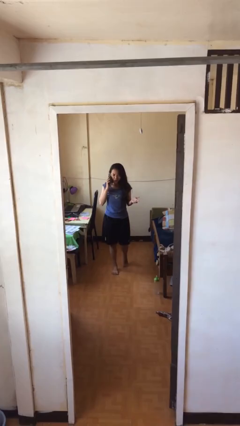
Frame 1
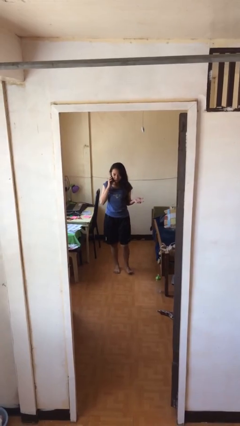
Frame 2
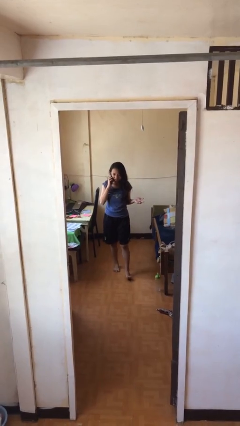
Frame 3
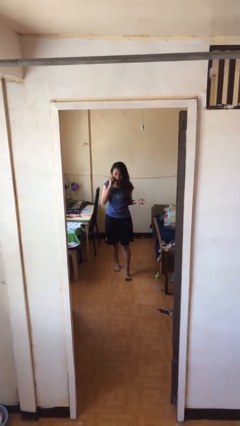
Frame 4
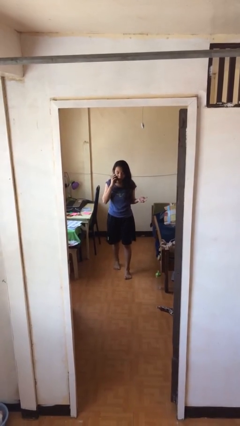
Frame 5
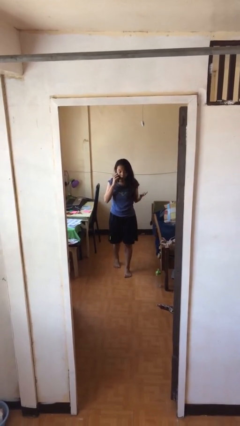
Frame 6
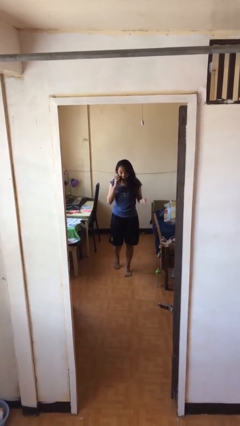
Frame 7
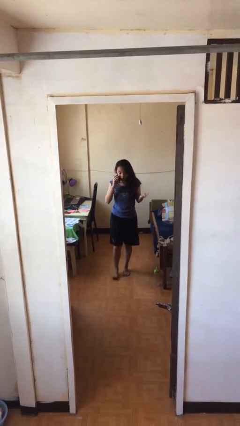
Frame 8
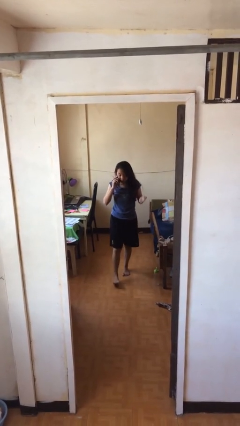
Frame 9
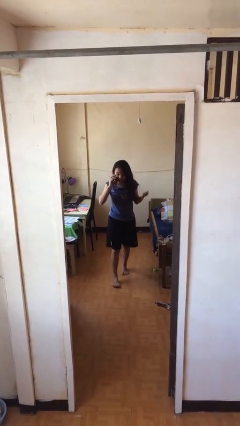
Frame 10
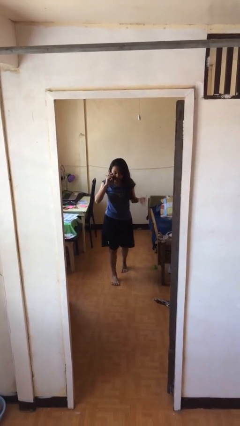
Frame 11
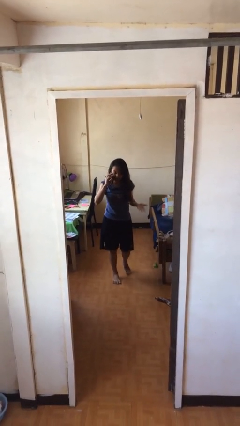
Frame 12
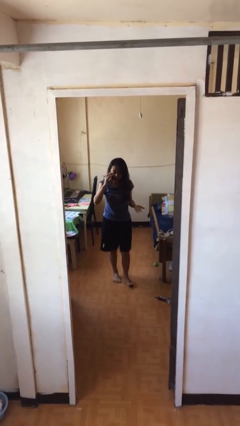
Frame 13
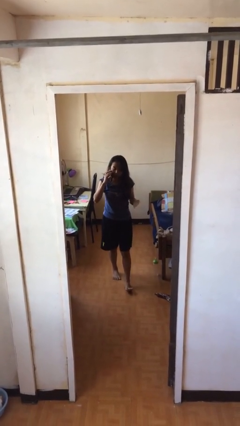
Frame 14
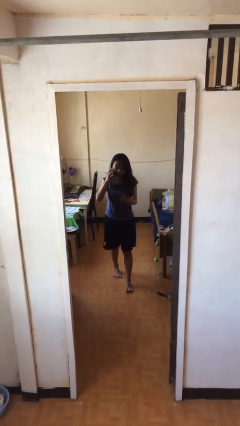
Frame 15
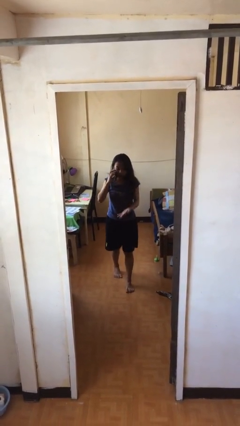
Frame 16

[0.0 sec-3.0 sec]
person talks on phone

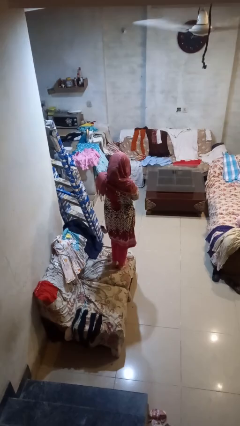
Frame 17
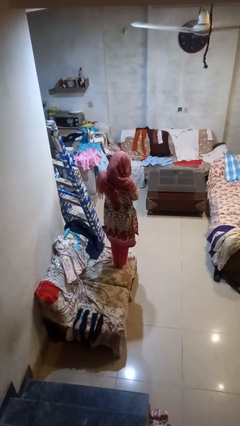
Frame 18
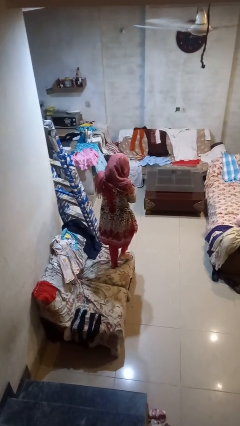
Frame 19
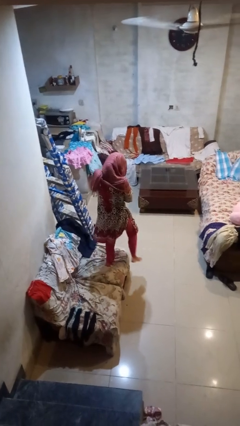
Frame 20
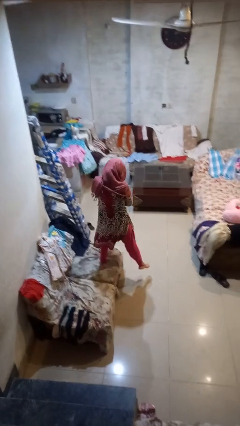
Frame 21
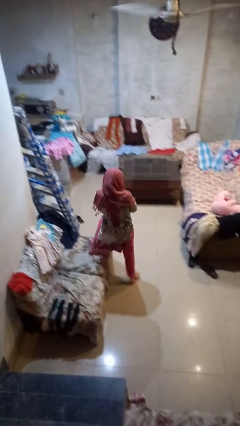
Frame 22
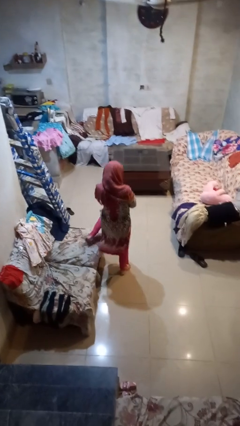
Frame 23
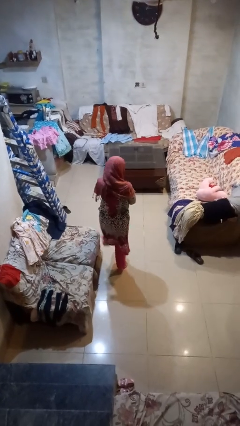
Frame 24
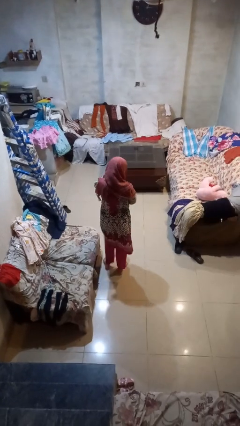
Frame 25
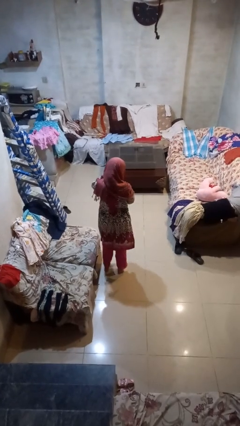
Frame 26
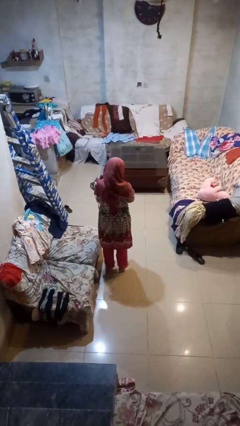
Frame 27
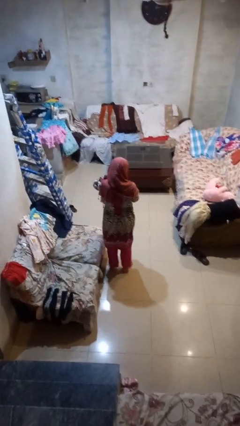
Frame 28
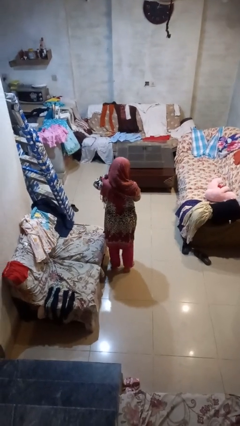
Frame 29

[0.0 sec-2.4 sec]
person climbs off couch

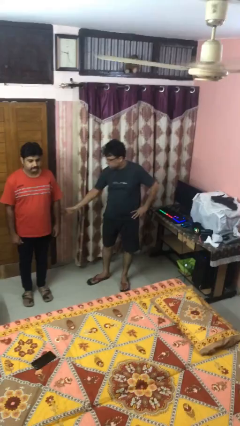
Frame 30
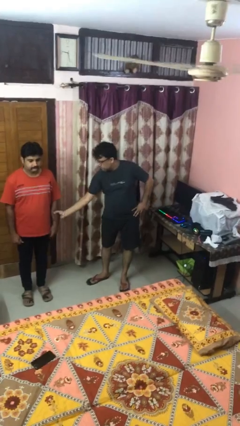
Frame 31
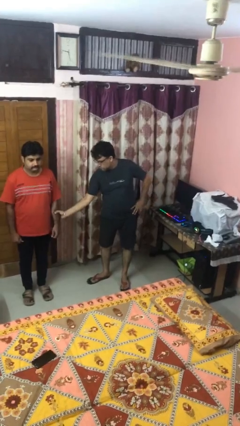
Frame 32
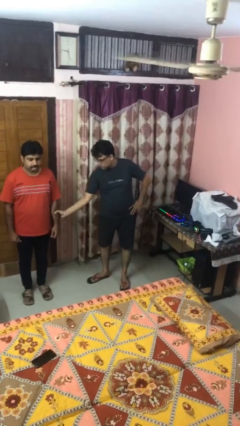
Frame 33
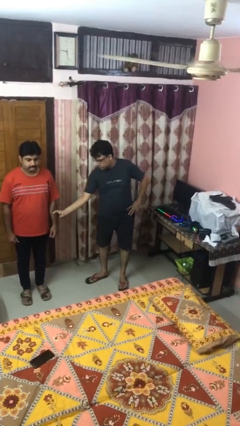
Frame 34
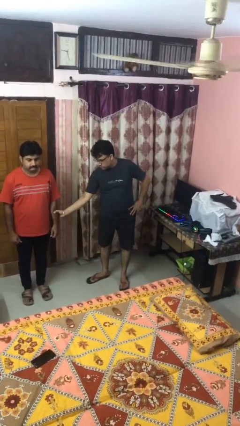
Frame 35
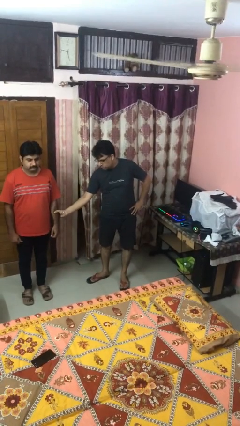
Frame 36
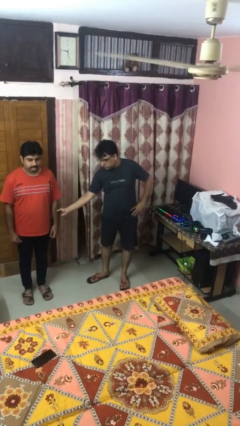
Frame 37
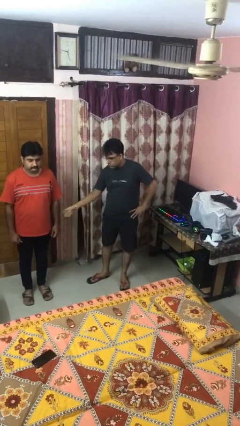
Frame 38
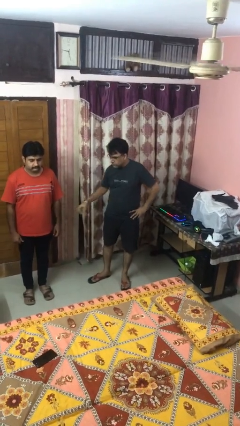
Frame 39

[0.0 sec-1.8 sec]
person grabs person by forearm

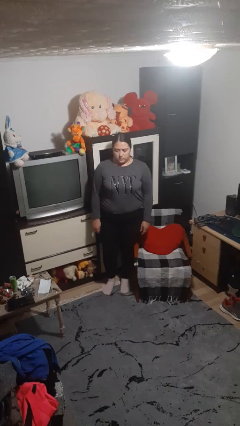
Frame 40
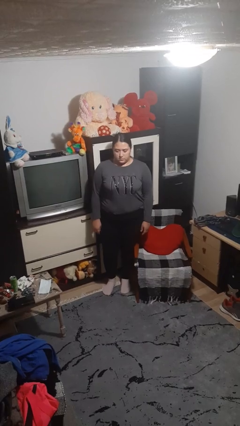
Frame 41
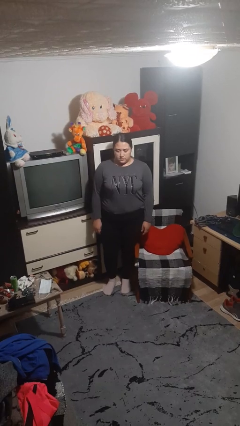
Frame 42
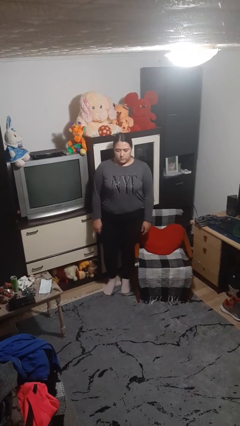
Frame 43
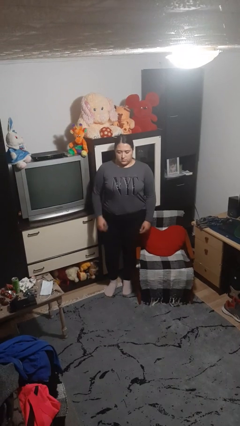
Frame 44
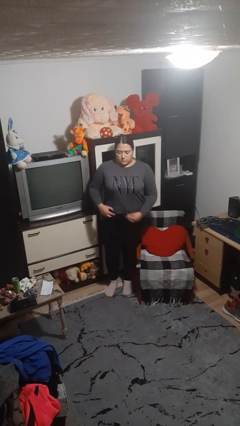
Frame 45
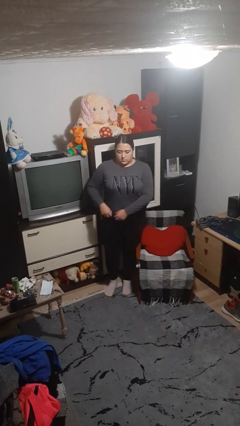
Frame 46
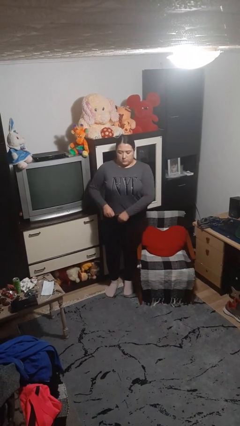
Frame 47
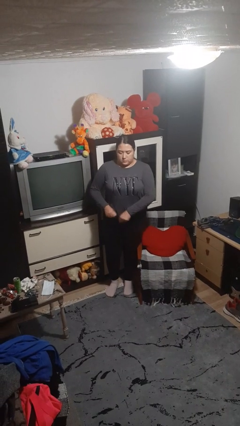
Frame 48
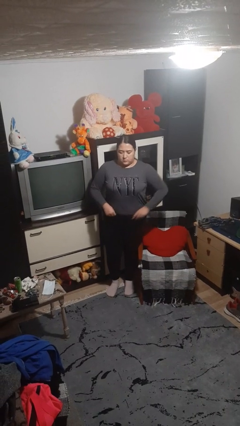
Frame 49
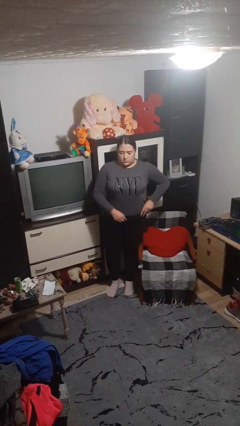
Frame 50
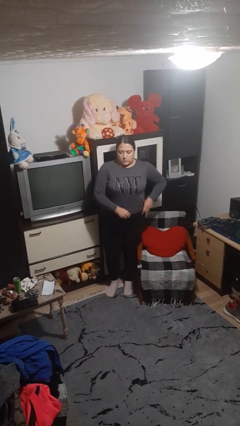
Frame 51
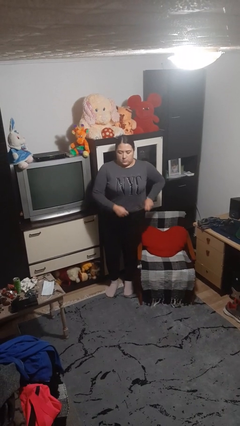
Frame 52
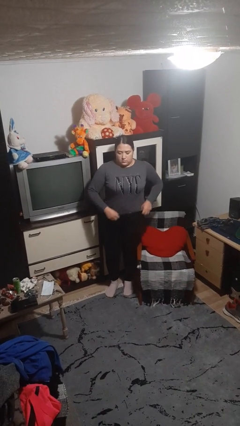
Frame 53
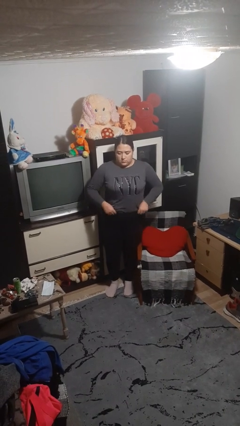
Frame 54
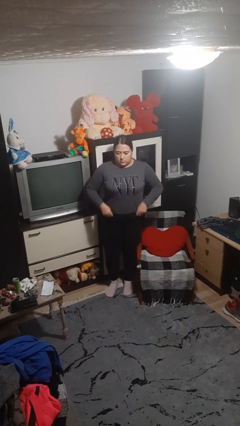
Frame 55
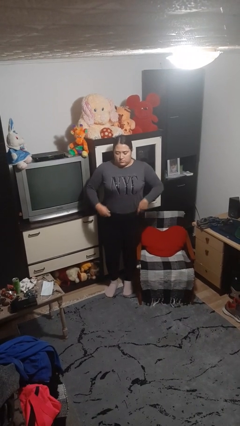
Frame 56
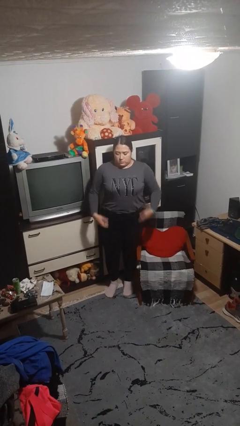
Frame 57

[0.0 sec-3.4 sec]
person hikes up pants

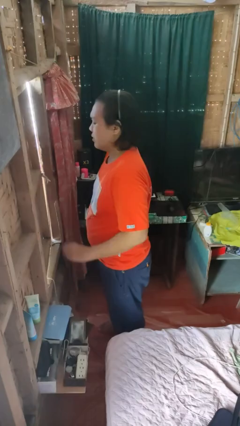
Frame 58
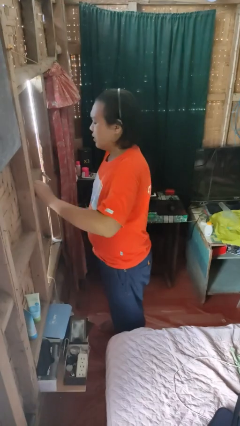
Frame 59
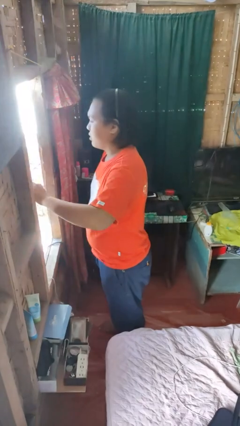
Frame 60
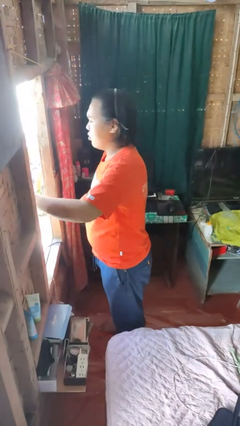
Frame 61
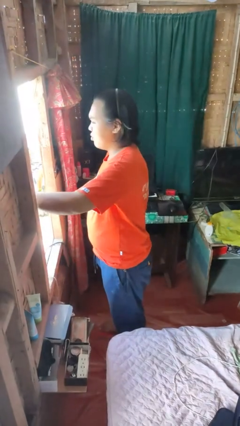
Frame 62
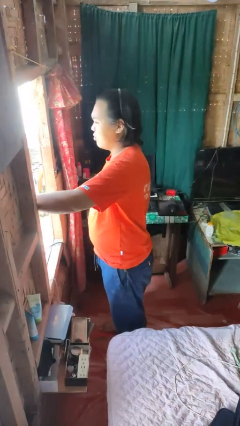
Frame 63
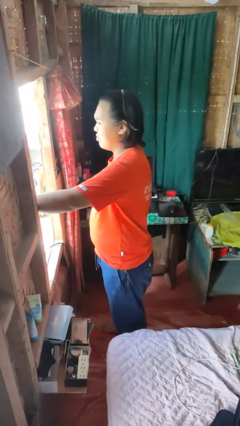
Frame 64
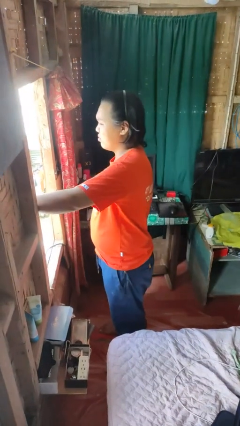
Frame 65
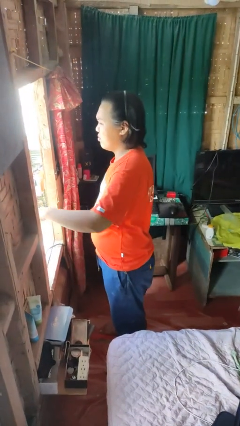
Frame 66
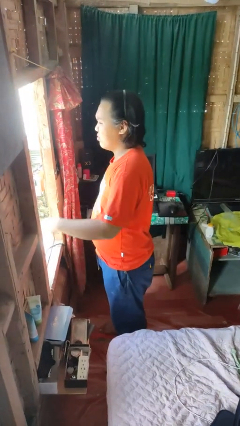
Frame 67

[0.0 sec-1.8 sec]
person opens home window

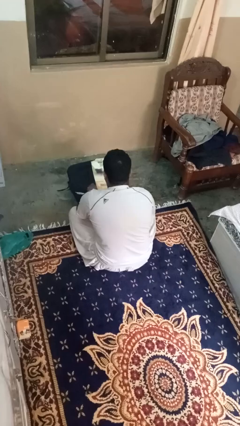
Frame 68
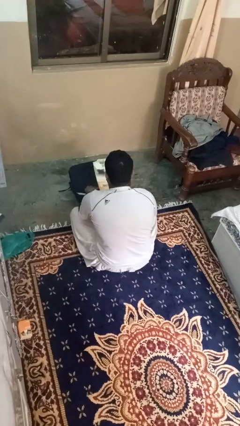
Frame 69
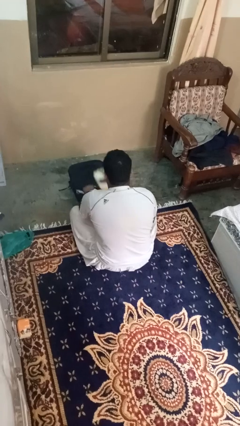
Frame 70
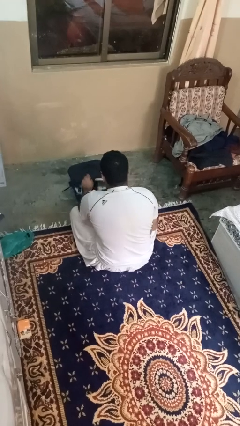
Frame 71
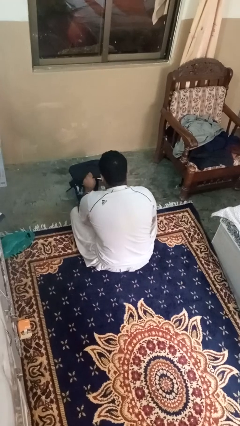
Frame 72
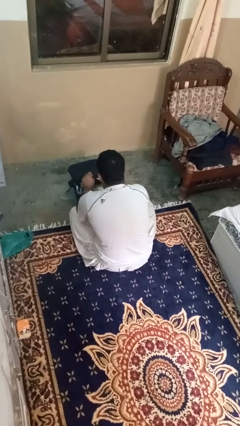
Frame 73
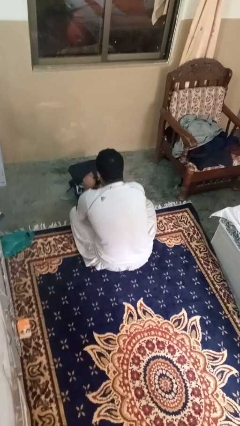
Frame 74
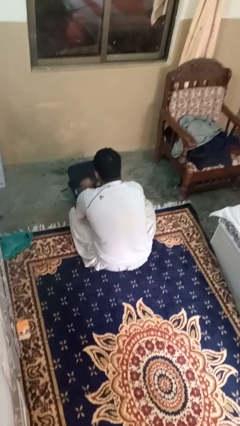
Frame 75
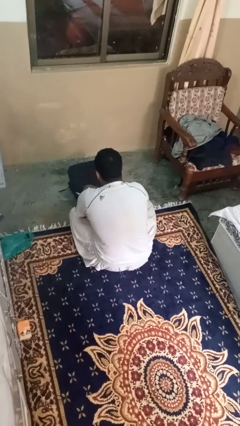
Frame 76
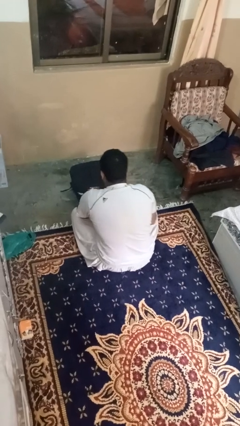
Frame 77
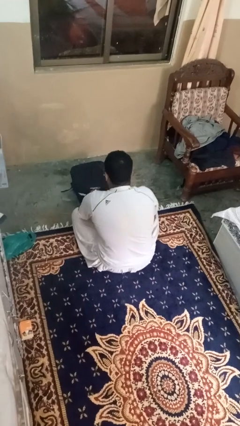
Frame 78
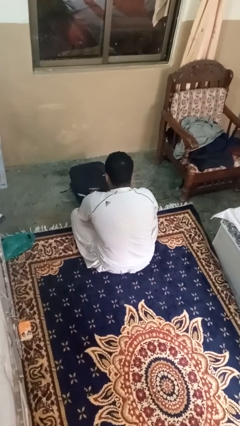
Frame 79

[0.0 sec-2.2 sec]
person puts object into bag

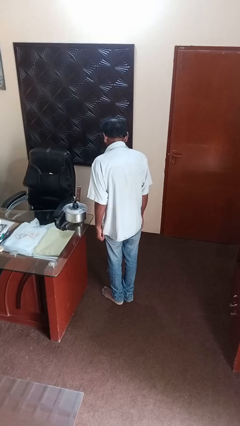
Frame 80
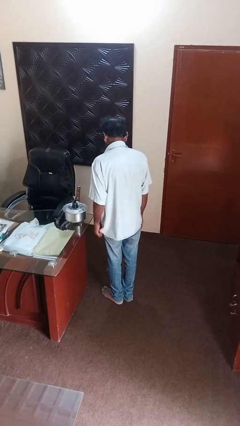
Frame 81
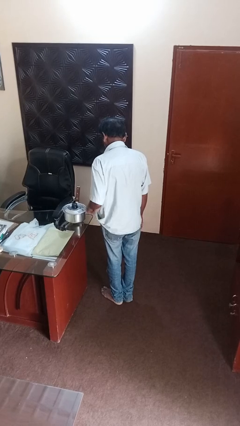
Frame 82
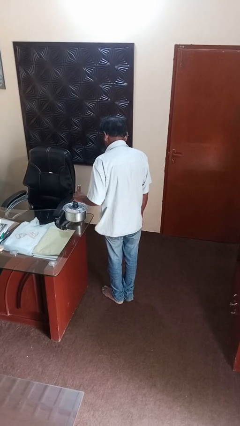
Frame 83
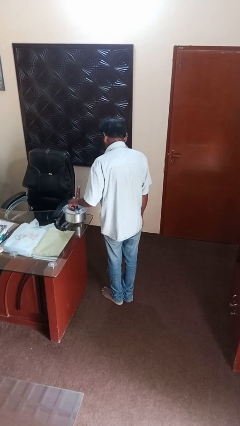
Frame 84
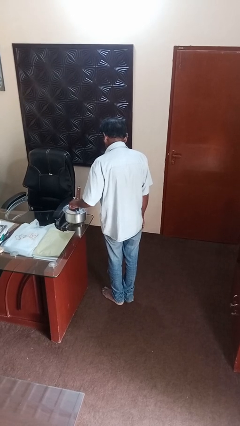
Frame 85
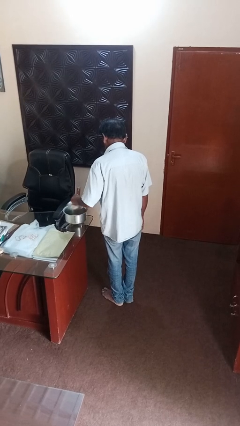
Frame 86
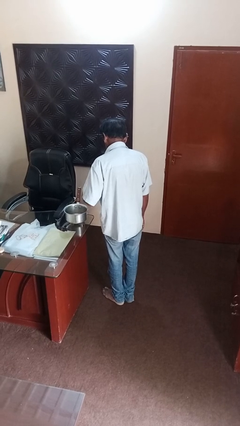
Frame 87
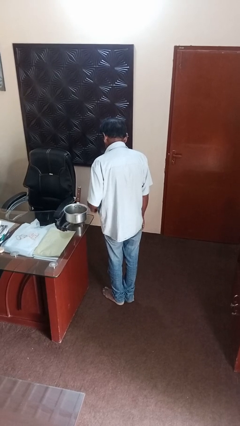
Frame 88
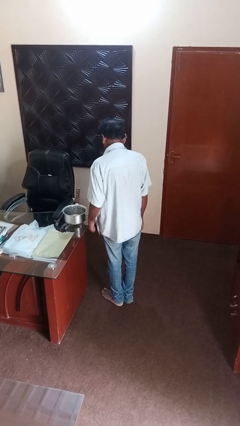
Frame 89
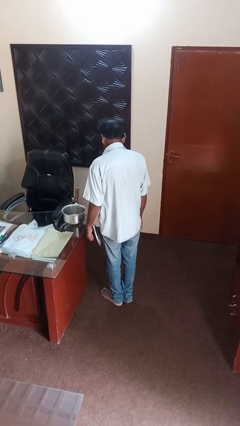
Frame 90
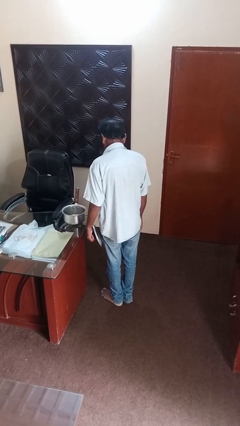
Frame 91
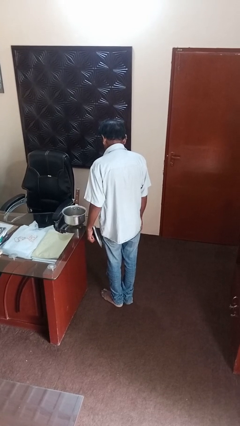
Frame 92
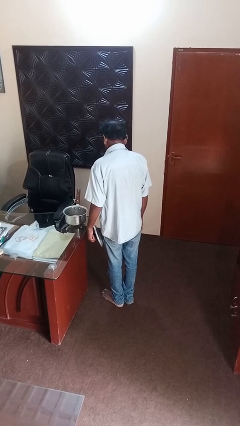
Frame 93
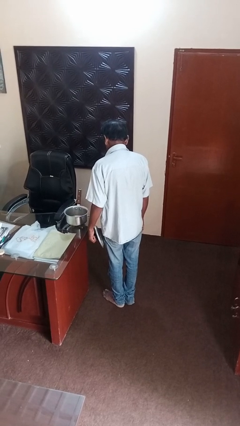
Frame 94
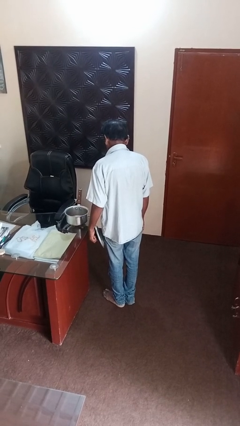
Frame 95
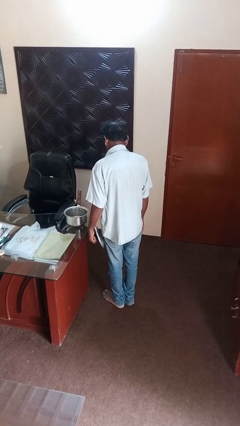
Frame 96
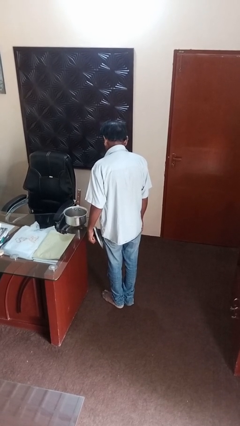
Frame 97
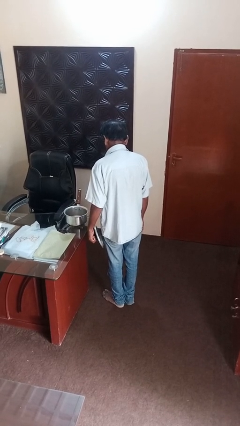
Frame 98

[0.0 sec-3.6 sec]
person opens jar
